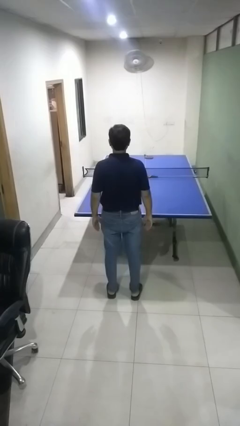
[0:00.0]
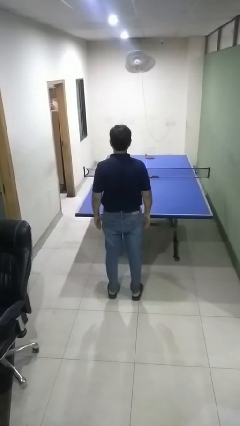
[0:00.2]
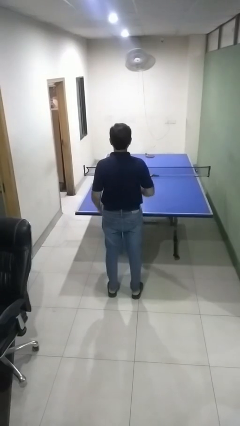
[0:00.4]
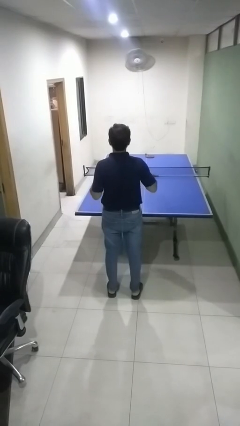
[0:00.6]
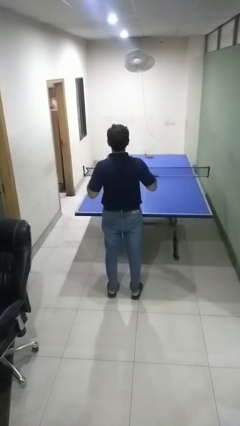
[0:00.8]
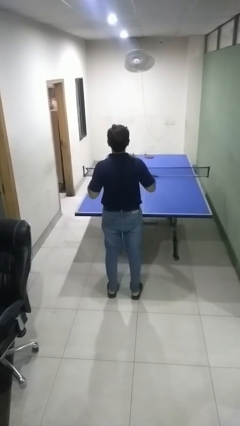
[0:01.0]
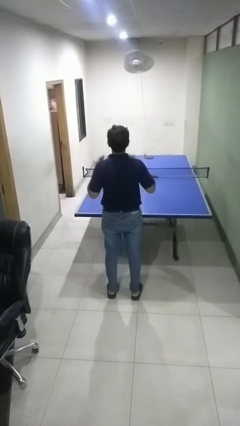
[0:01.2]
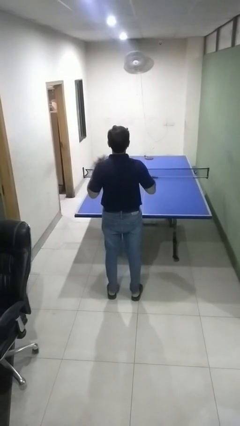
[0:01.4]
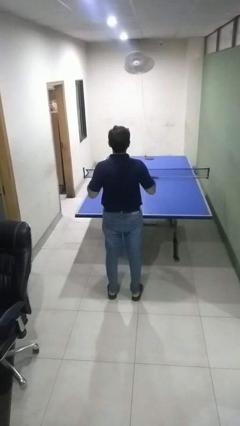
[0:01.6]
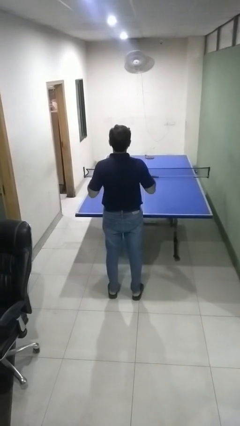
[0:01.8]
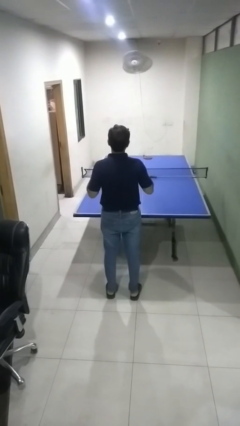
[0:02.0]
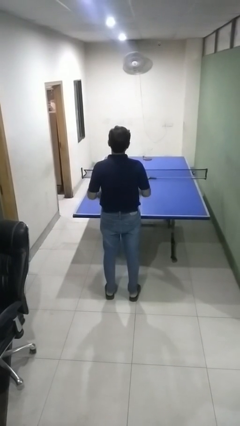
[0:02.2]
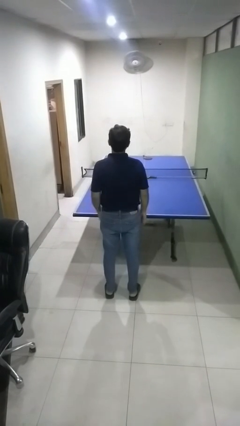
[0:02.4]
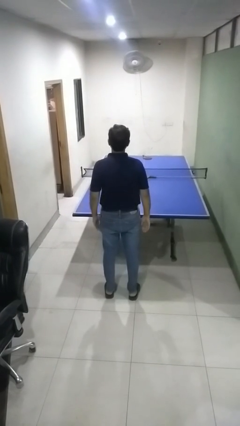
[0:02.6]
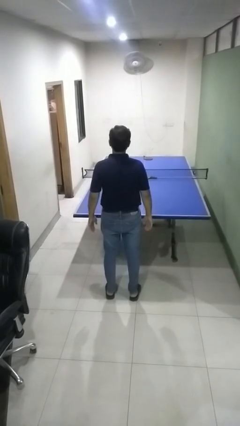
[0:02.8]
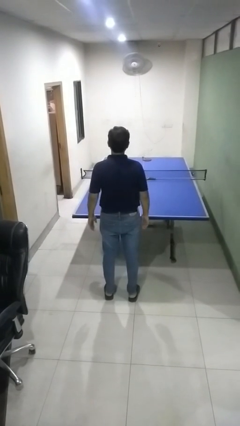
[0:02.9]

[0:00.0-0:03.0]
person drums on chest

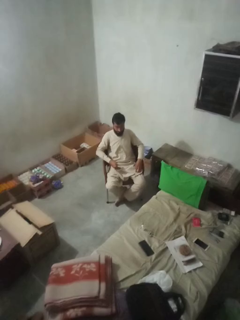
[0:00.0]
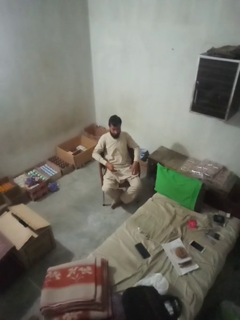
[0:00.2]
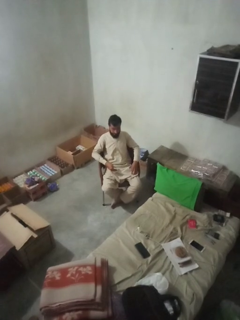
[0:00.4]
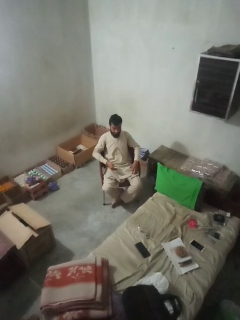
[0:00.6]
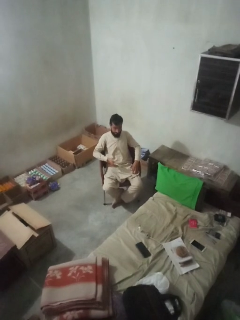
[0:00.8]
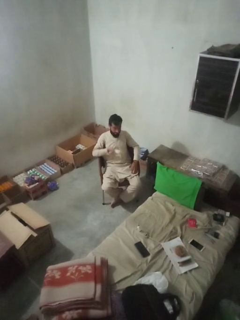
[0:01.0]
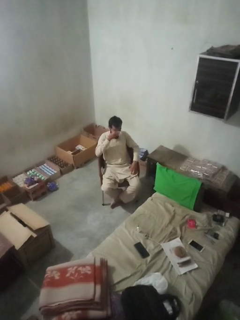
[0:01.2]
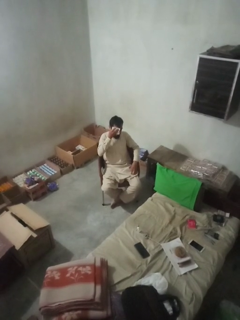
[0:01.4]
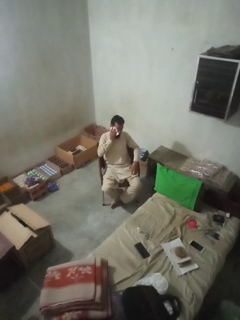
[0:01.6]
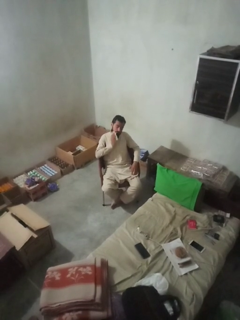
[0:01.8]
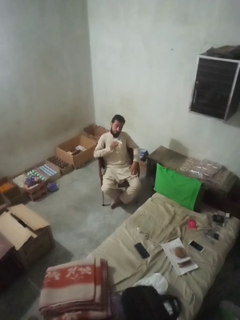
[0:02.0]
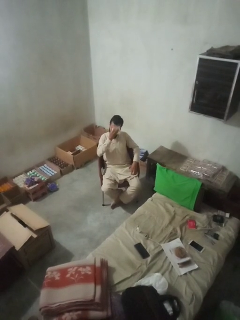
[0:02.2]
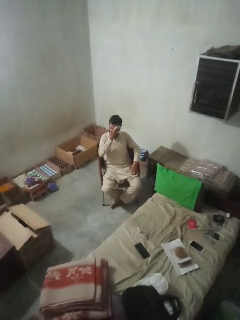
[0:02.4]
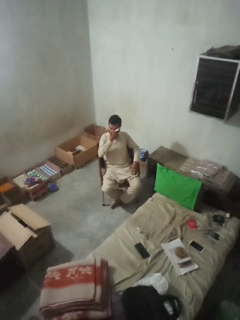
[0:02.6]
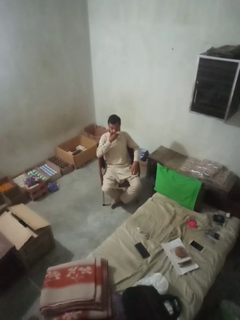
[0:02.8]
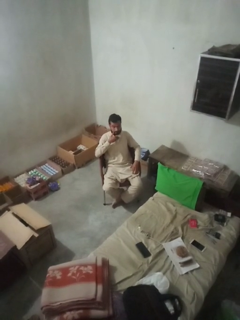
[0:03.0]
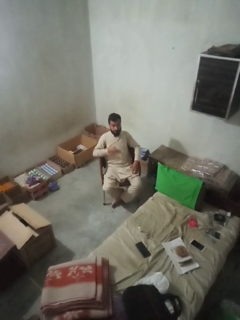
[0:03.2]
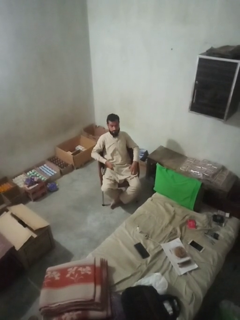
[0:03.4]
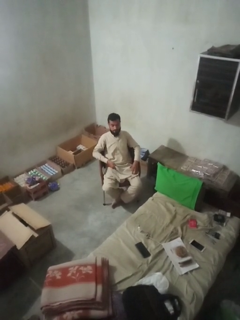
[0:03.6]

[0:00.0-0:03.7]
person wipes mouth with napkin

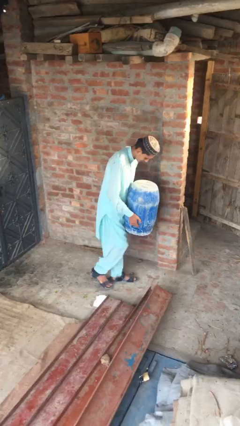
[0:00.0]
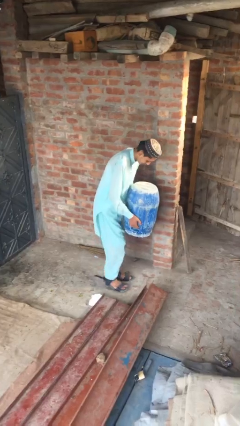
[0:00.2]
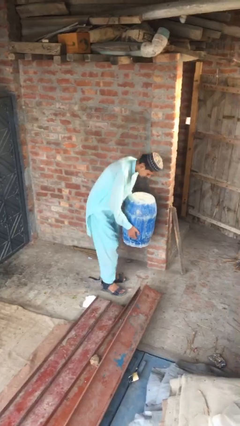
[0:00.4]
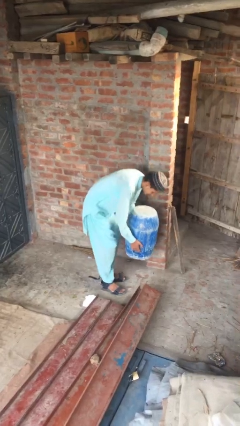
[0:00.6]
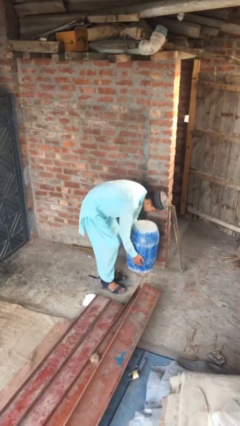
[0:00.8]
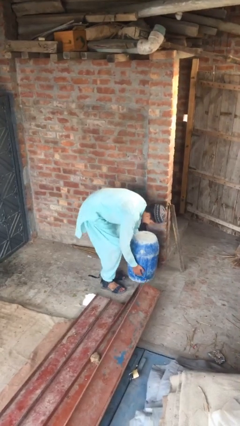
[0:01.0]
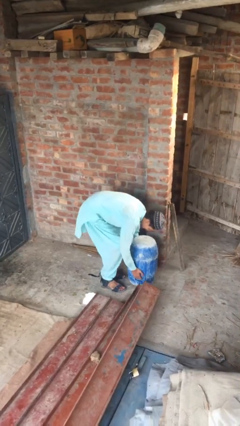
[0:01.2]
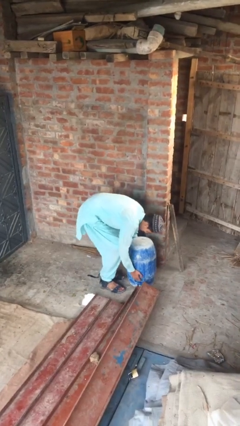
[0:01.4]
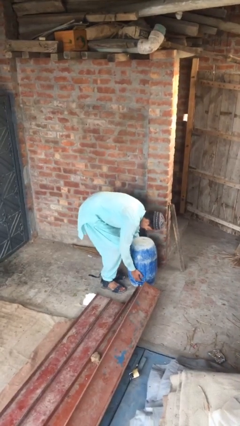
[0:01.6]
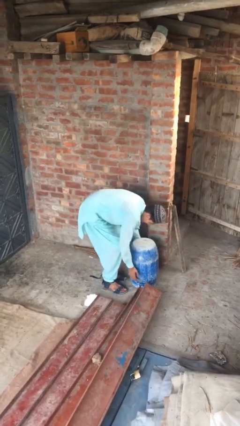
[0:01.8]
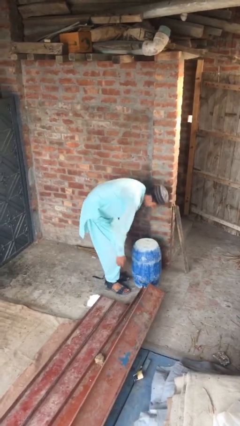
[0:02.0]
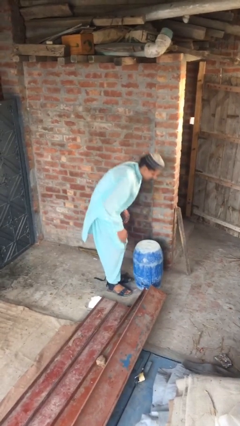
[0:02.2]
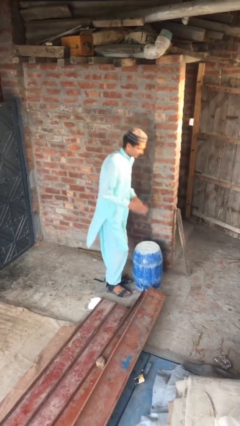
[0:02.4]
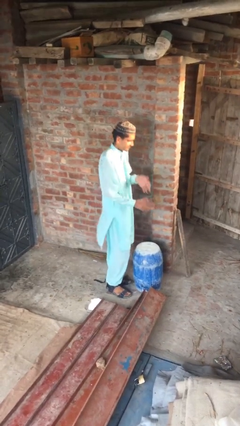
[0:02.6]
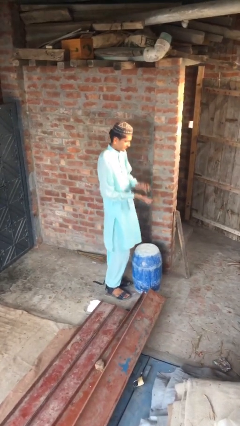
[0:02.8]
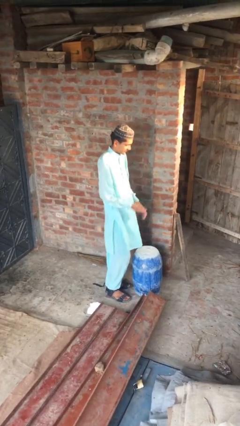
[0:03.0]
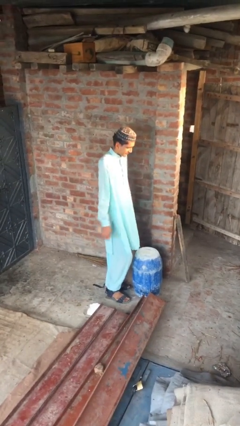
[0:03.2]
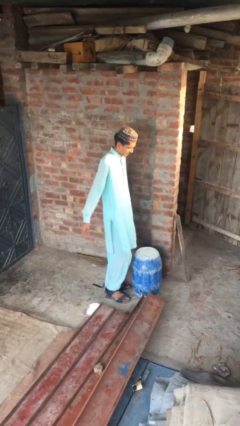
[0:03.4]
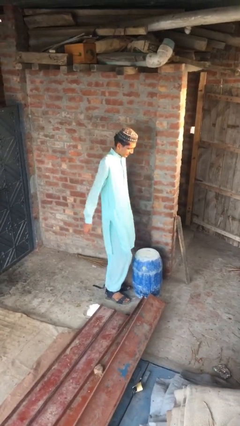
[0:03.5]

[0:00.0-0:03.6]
person puts down object on floor

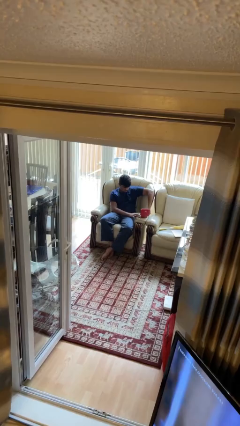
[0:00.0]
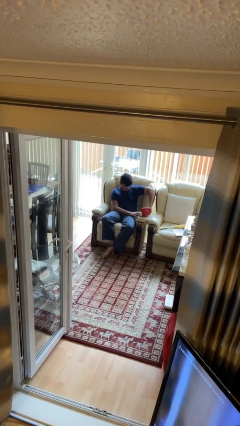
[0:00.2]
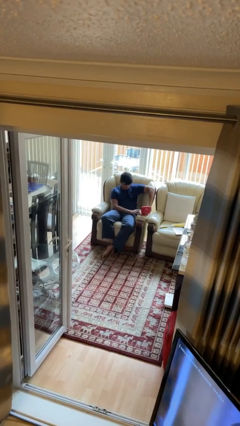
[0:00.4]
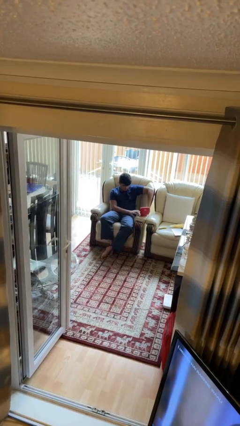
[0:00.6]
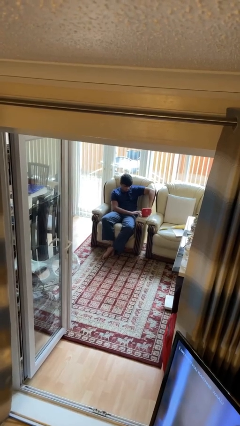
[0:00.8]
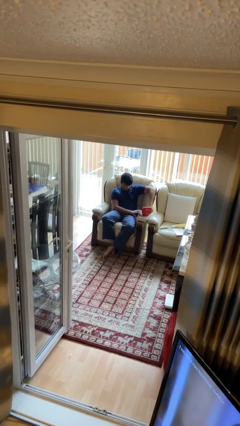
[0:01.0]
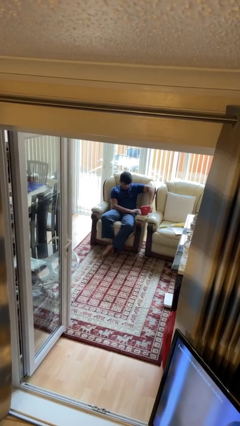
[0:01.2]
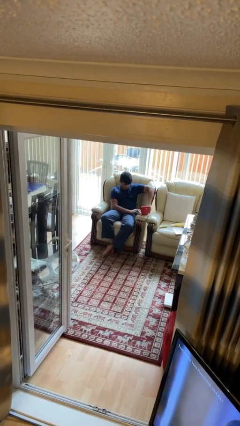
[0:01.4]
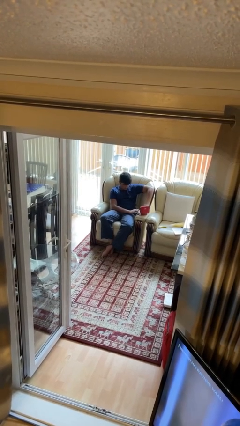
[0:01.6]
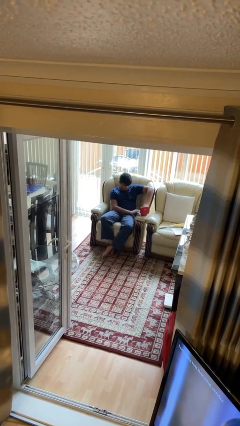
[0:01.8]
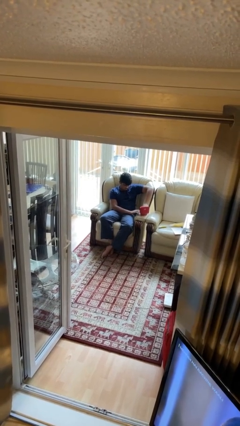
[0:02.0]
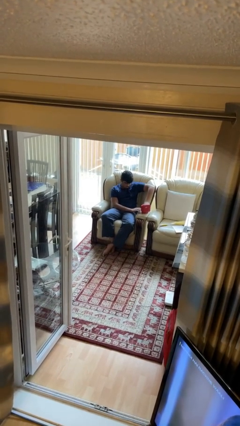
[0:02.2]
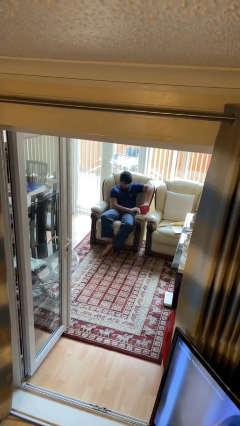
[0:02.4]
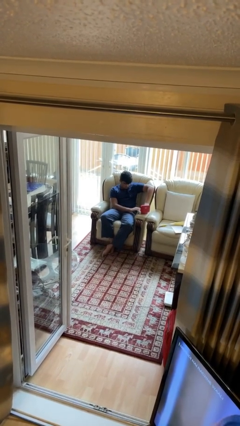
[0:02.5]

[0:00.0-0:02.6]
person searches jewelry box

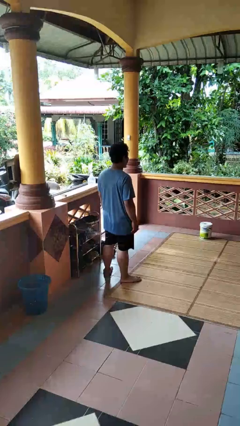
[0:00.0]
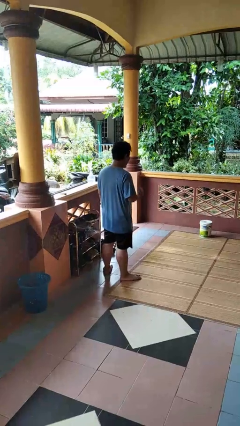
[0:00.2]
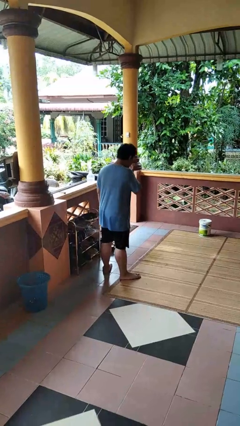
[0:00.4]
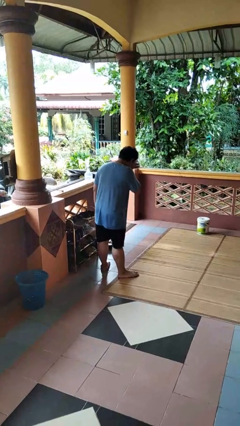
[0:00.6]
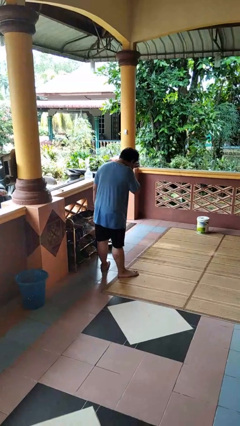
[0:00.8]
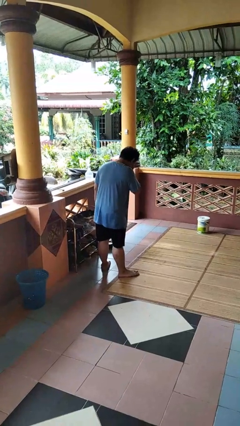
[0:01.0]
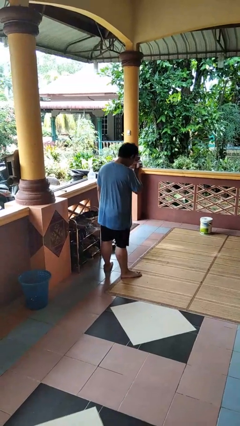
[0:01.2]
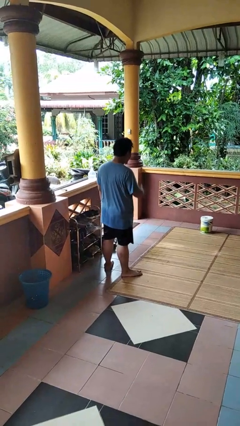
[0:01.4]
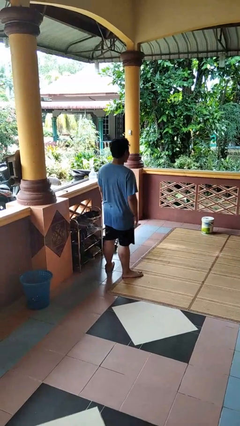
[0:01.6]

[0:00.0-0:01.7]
person sneezes into hand

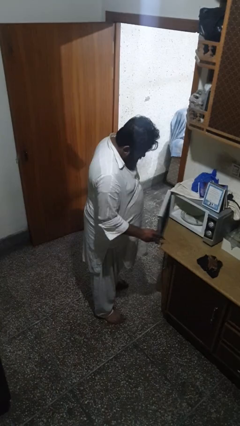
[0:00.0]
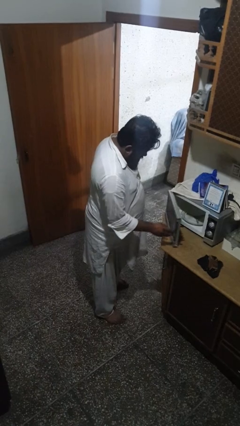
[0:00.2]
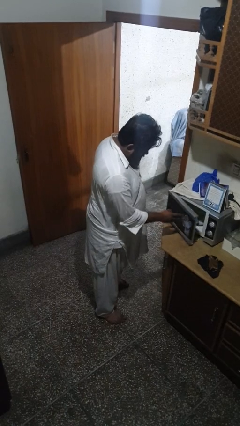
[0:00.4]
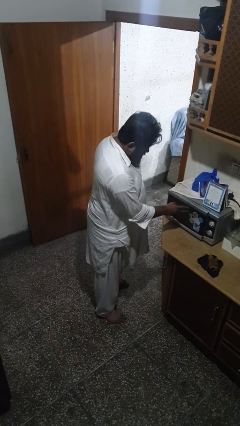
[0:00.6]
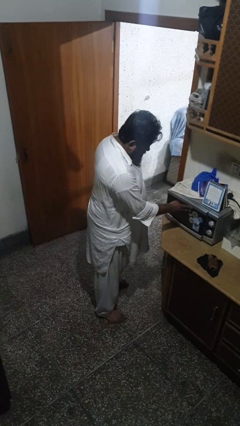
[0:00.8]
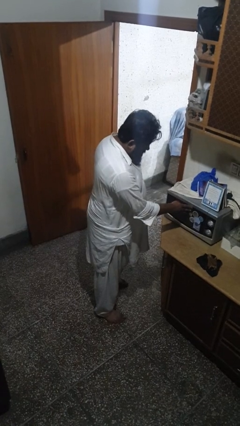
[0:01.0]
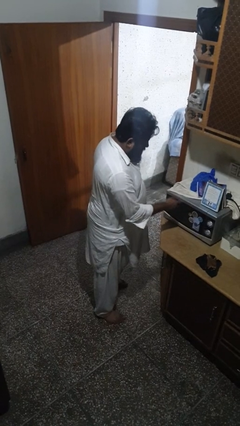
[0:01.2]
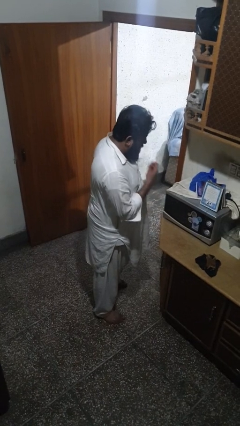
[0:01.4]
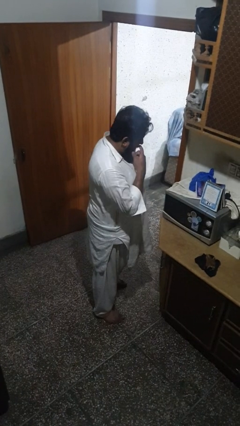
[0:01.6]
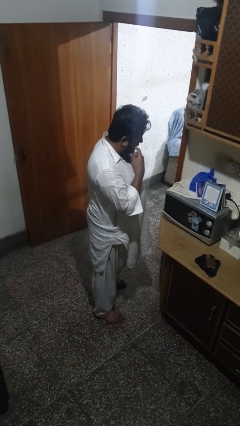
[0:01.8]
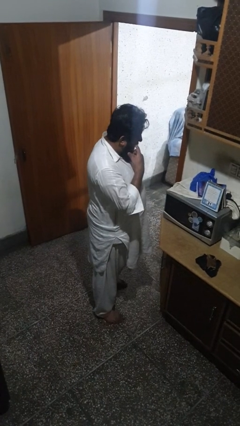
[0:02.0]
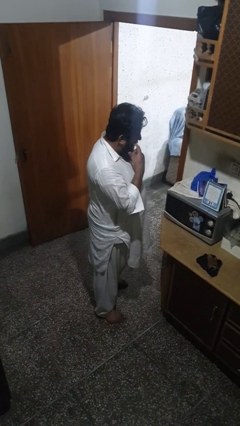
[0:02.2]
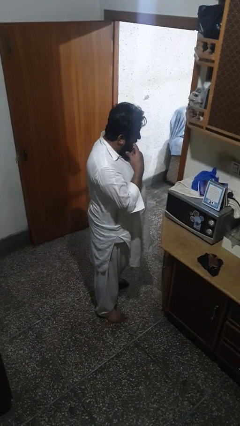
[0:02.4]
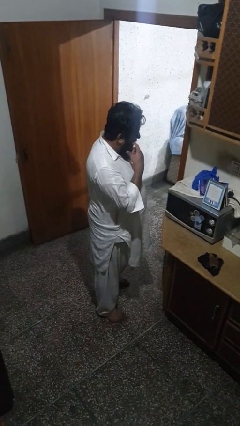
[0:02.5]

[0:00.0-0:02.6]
person closes oven door

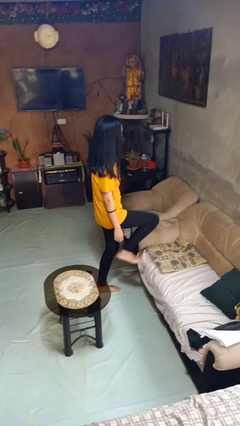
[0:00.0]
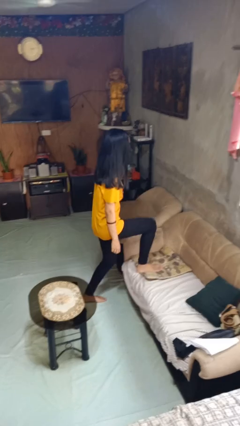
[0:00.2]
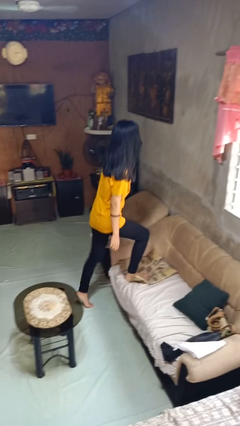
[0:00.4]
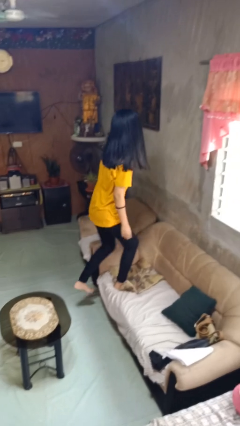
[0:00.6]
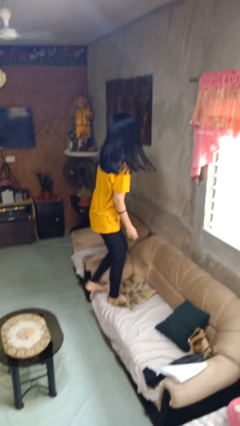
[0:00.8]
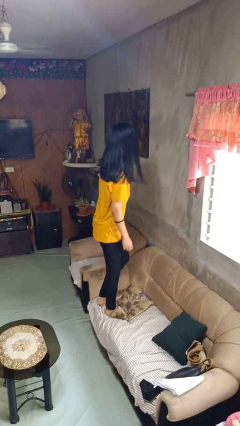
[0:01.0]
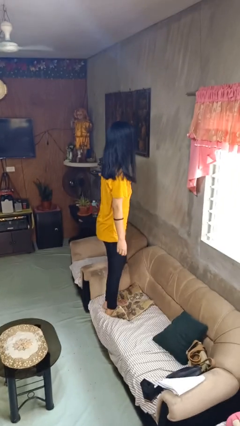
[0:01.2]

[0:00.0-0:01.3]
person climbs on couch
